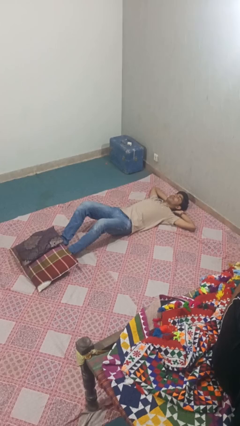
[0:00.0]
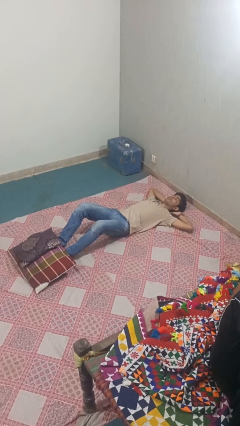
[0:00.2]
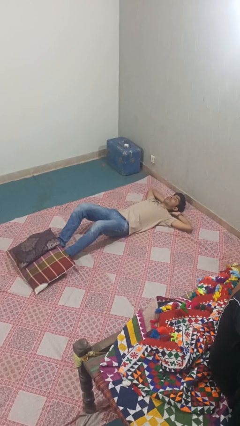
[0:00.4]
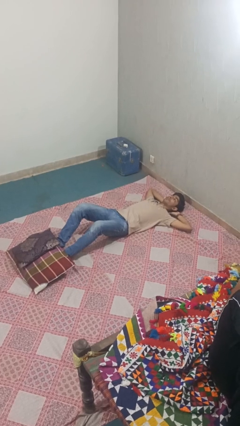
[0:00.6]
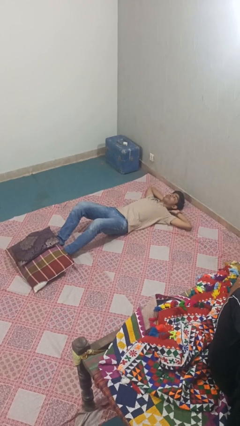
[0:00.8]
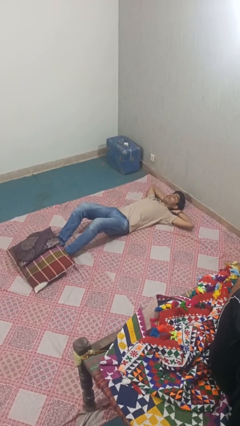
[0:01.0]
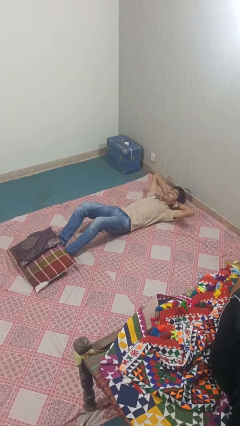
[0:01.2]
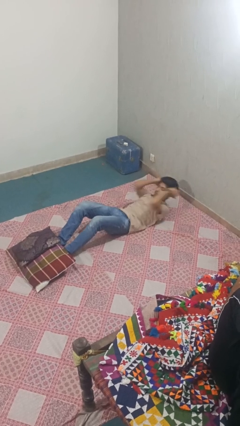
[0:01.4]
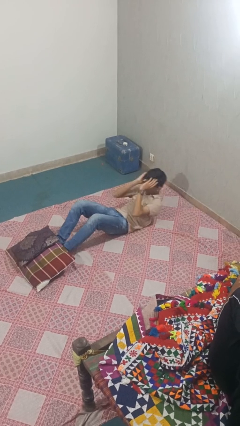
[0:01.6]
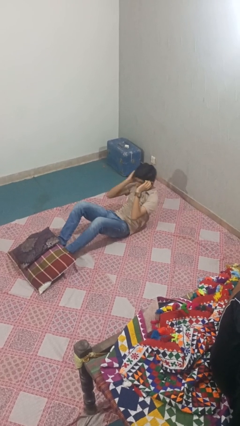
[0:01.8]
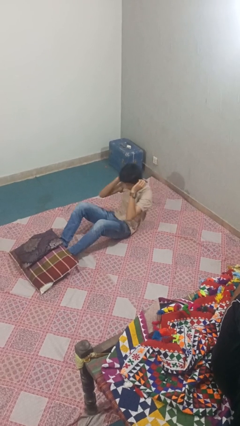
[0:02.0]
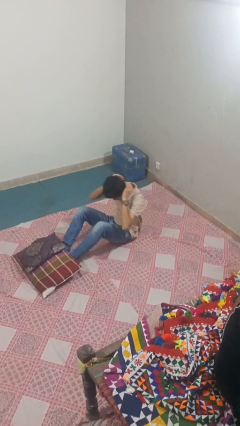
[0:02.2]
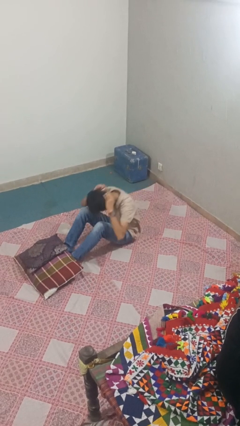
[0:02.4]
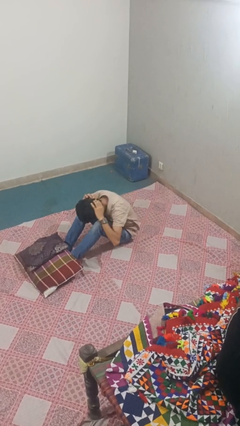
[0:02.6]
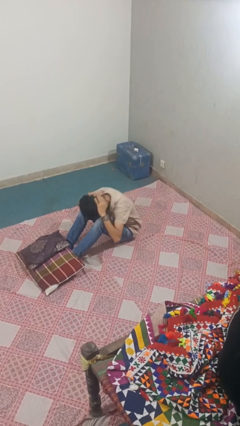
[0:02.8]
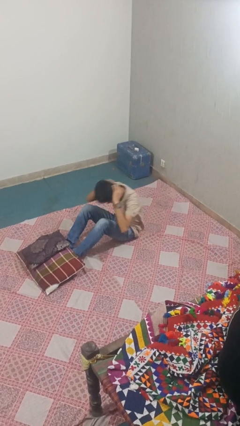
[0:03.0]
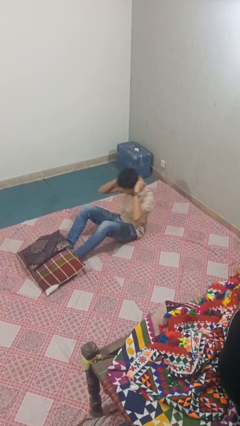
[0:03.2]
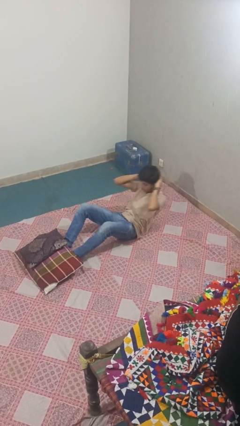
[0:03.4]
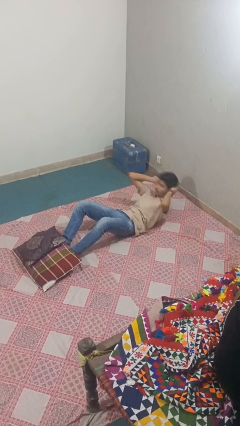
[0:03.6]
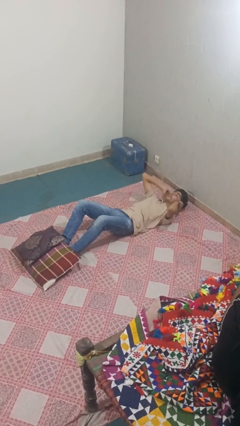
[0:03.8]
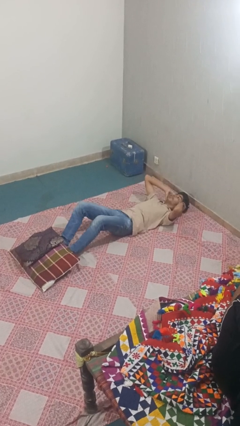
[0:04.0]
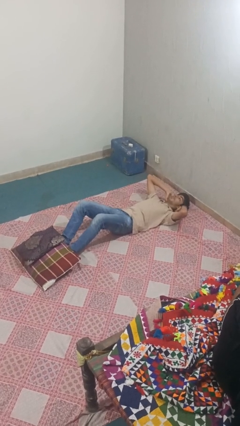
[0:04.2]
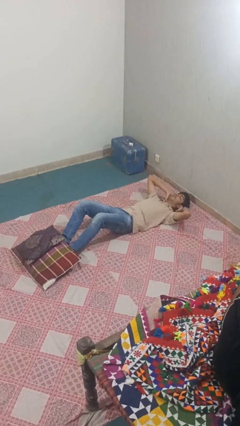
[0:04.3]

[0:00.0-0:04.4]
person exercises with situp

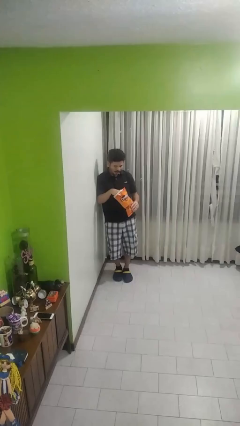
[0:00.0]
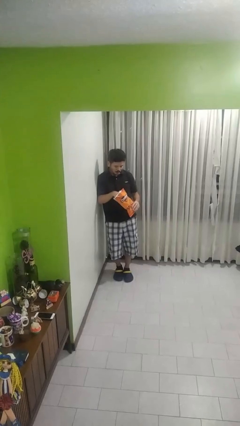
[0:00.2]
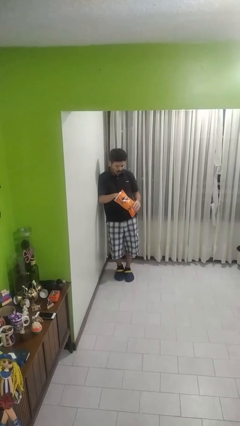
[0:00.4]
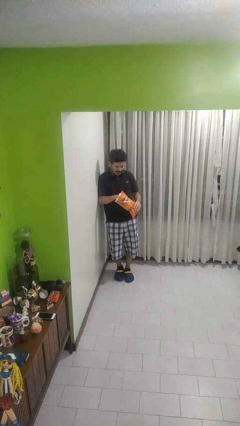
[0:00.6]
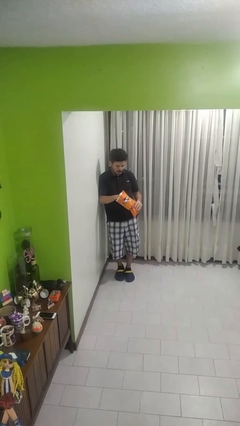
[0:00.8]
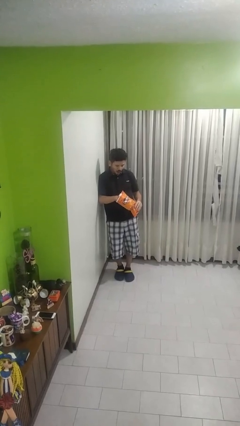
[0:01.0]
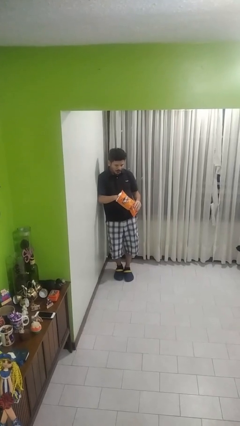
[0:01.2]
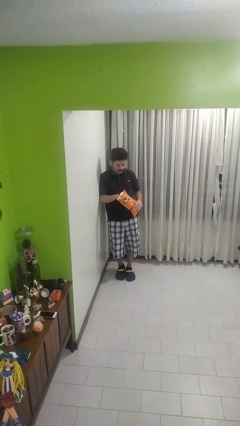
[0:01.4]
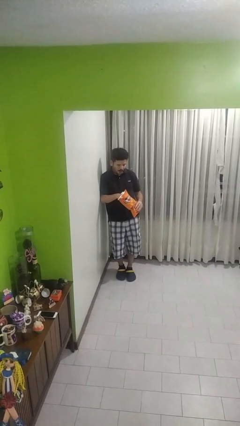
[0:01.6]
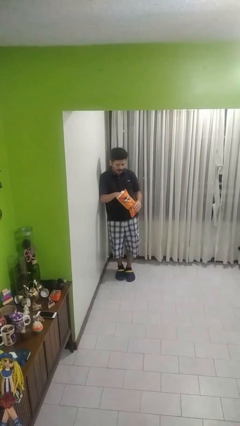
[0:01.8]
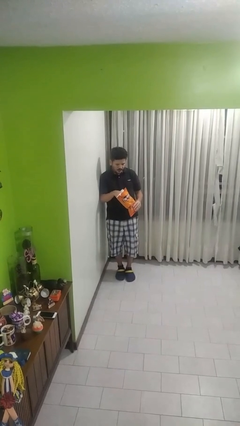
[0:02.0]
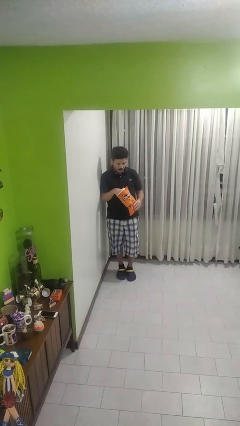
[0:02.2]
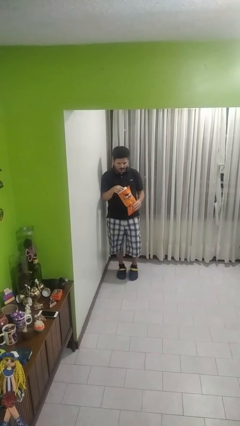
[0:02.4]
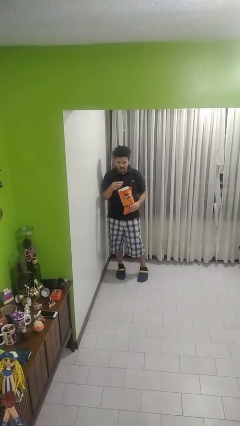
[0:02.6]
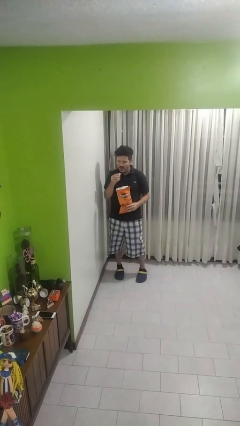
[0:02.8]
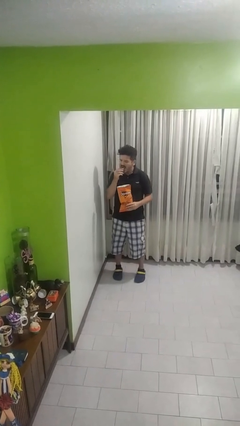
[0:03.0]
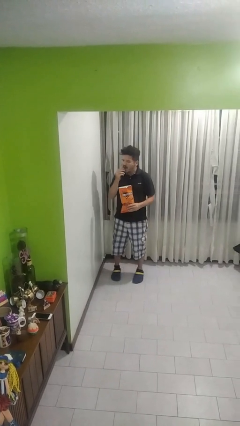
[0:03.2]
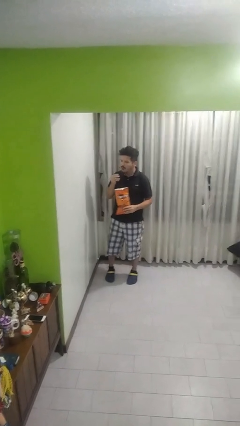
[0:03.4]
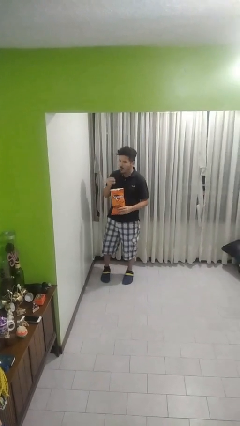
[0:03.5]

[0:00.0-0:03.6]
person eats snack from bag

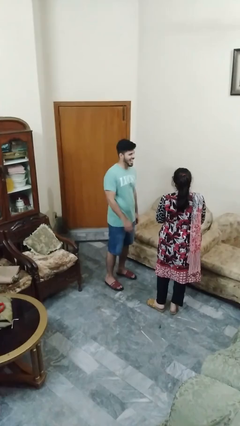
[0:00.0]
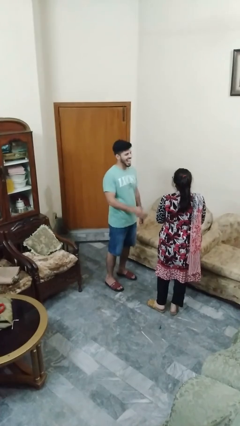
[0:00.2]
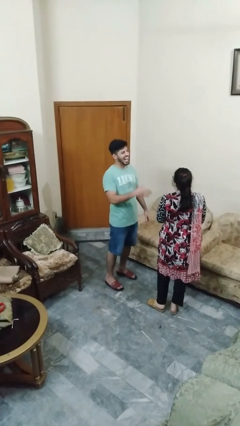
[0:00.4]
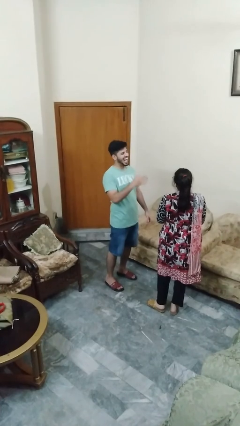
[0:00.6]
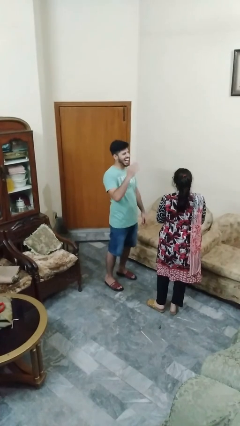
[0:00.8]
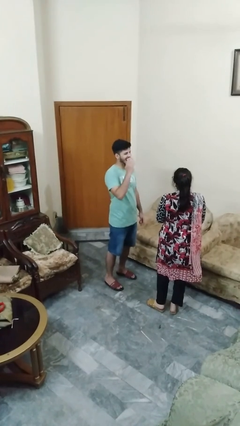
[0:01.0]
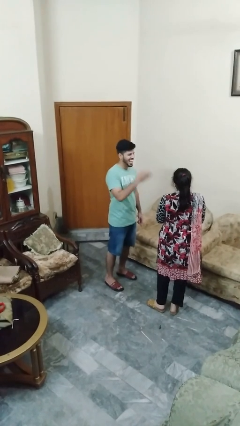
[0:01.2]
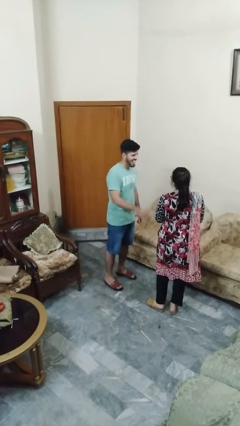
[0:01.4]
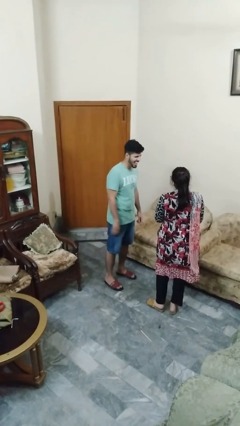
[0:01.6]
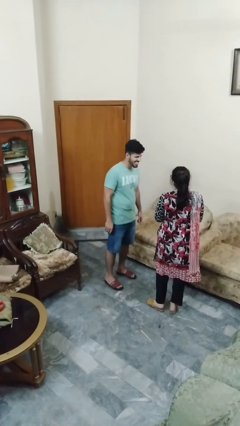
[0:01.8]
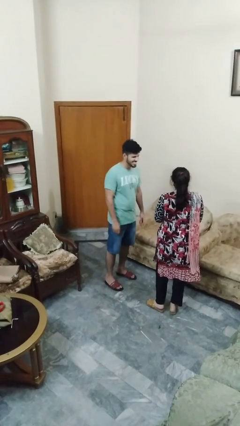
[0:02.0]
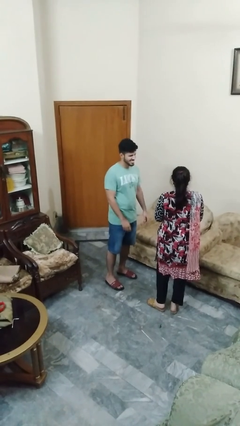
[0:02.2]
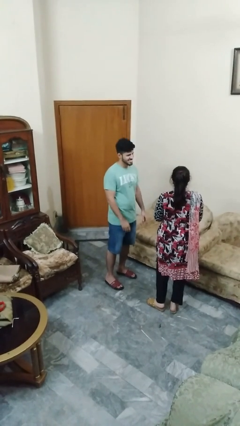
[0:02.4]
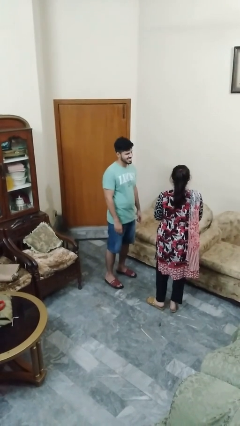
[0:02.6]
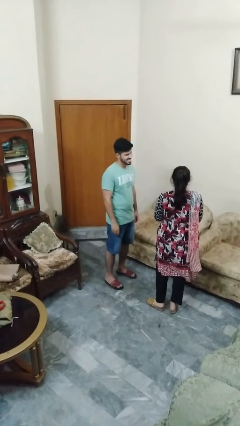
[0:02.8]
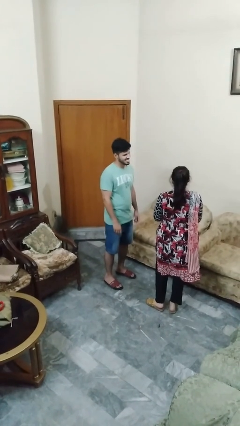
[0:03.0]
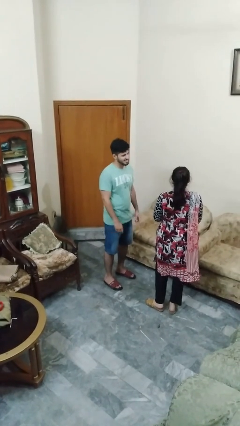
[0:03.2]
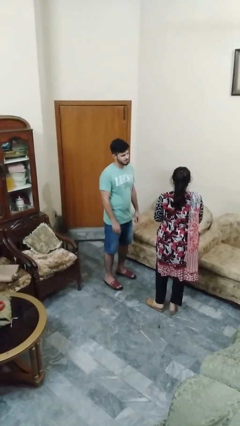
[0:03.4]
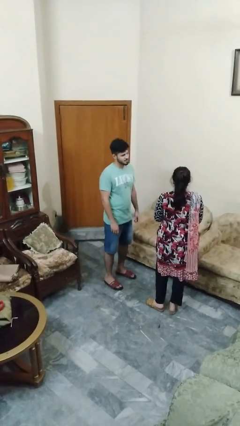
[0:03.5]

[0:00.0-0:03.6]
person laughs with person

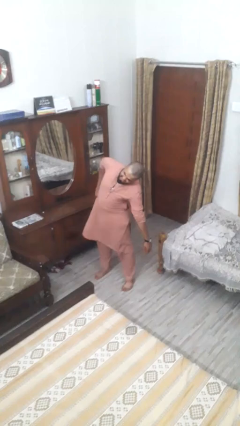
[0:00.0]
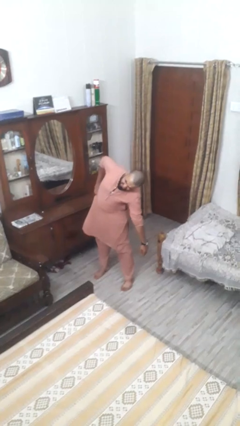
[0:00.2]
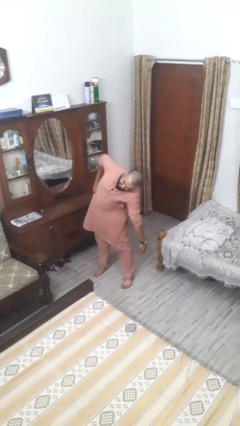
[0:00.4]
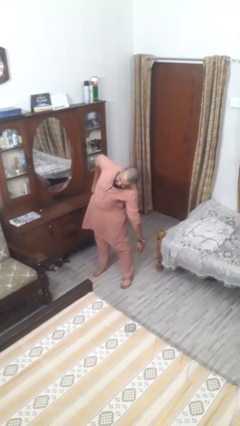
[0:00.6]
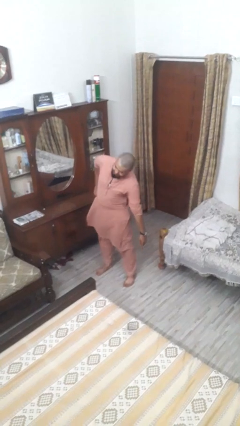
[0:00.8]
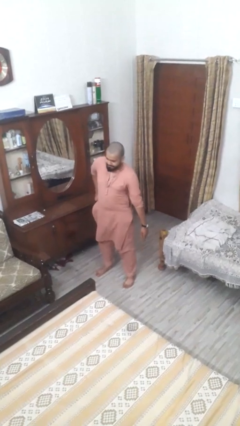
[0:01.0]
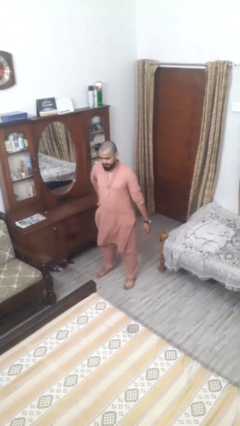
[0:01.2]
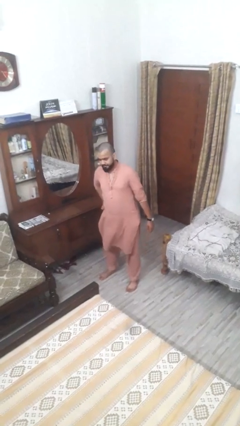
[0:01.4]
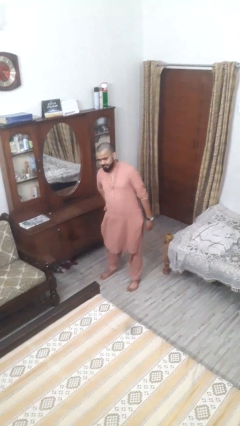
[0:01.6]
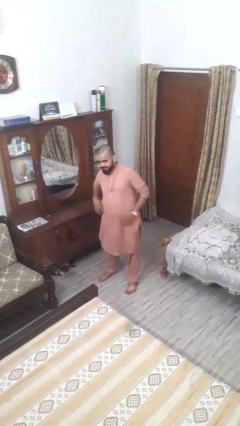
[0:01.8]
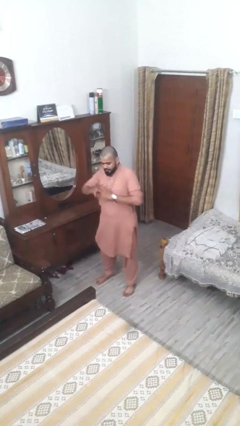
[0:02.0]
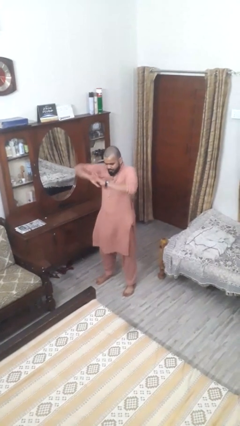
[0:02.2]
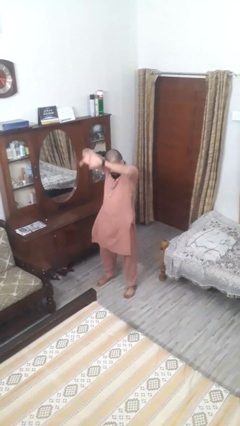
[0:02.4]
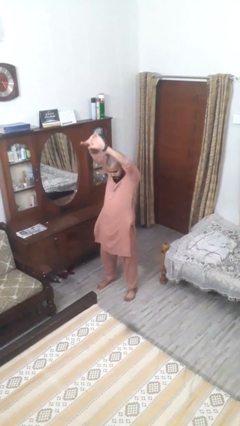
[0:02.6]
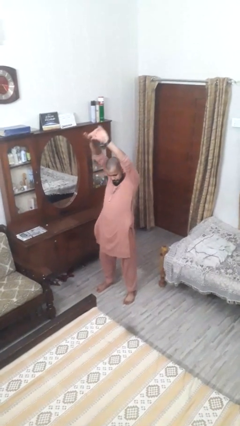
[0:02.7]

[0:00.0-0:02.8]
person stretches arms to side

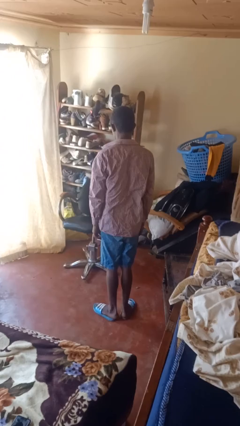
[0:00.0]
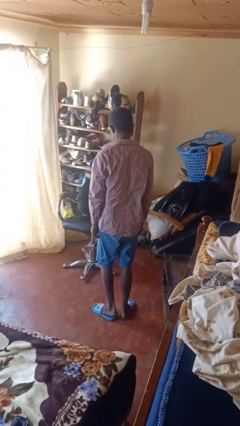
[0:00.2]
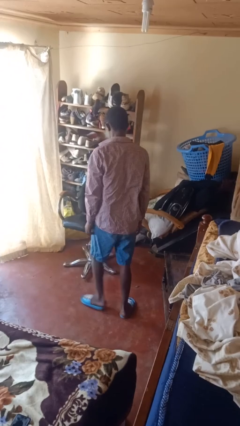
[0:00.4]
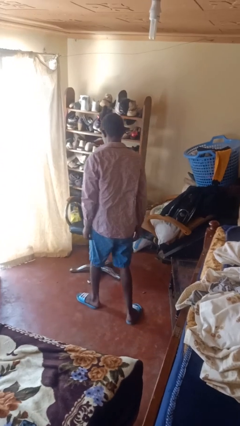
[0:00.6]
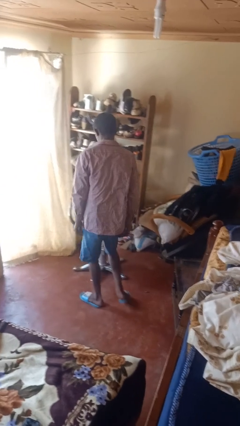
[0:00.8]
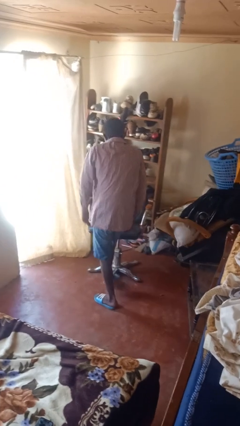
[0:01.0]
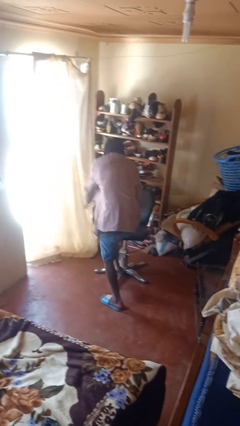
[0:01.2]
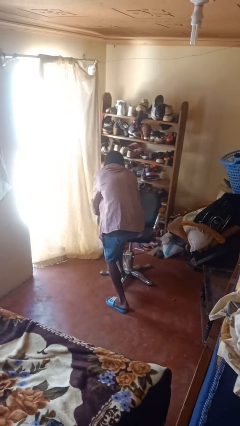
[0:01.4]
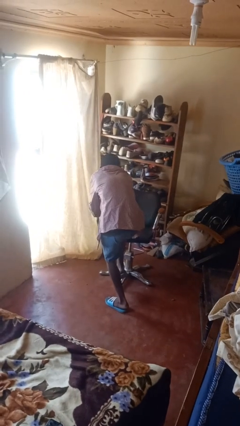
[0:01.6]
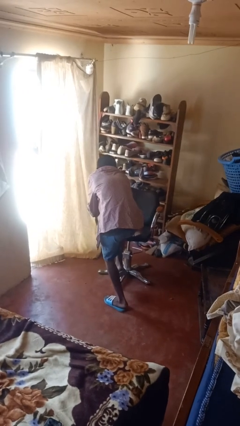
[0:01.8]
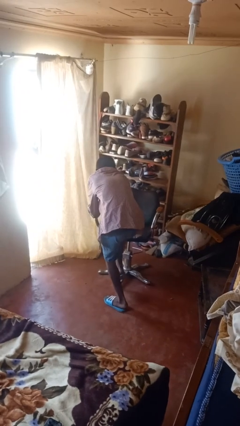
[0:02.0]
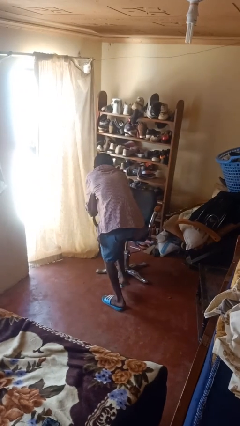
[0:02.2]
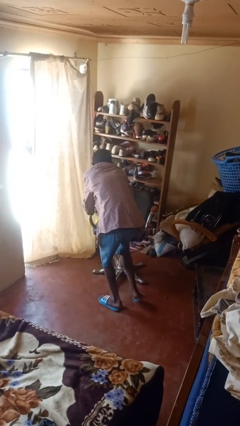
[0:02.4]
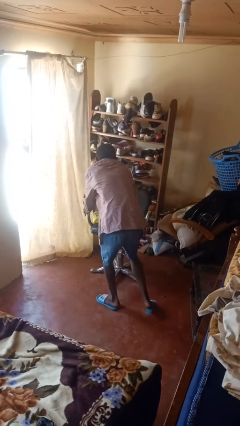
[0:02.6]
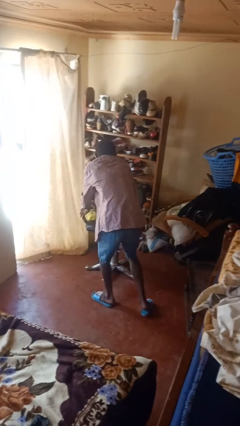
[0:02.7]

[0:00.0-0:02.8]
person stubs toe

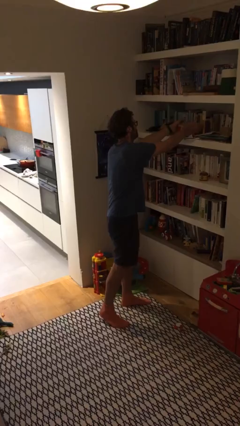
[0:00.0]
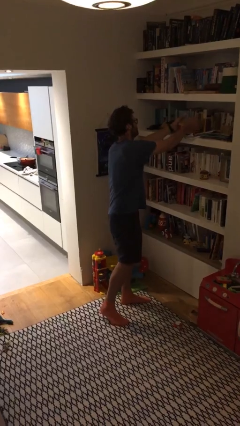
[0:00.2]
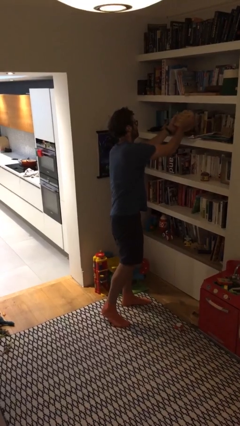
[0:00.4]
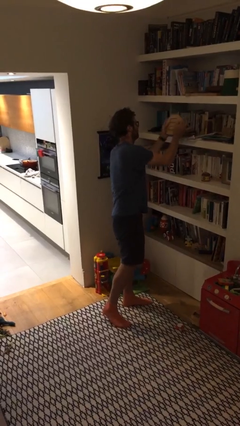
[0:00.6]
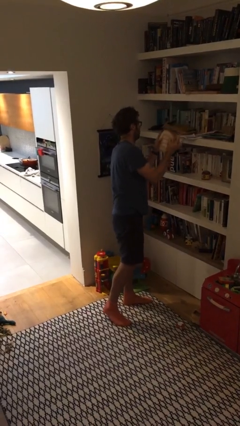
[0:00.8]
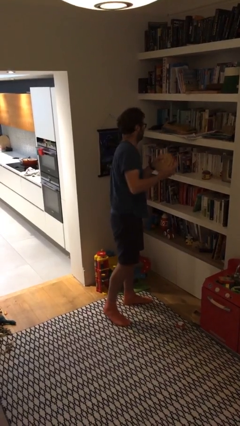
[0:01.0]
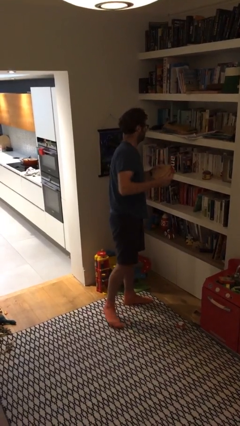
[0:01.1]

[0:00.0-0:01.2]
person picks up object from shelf
